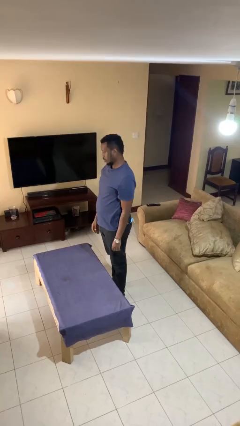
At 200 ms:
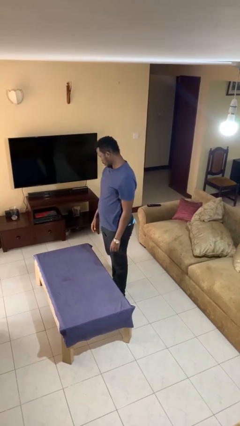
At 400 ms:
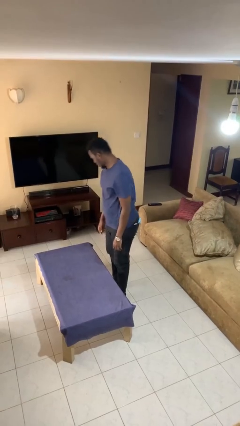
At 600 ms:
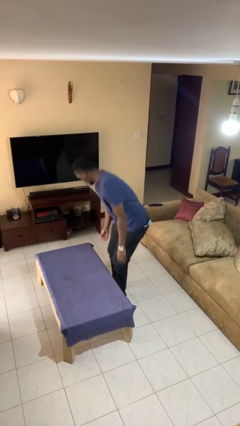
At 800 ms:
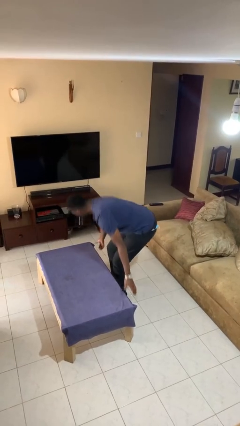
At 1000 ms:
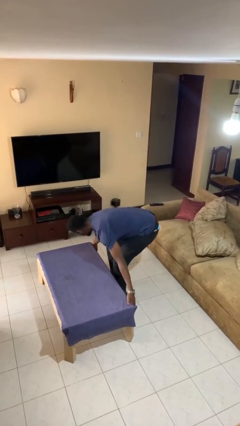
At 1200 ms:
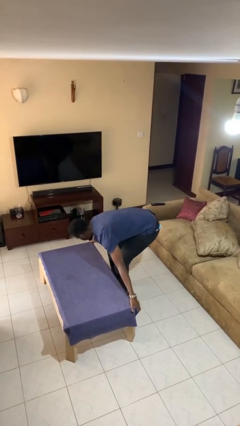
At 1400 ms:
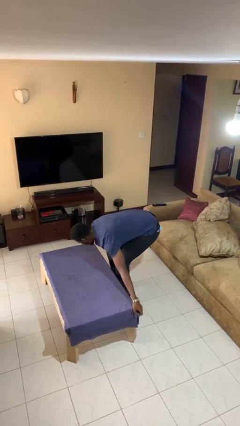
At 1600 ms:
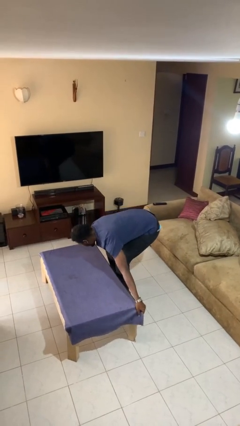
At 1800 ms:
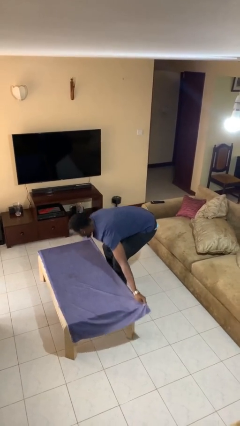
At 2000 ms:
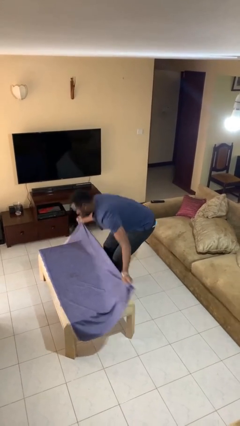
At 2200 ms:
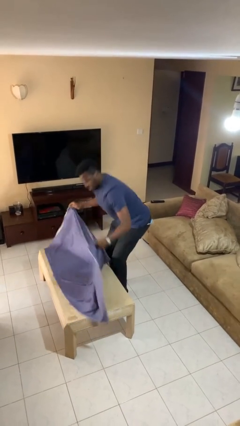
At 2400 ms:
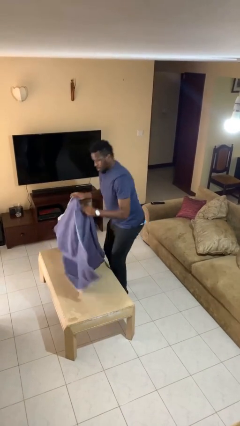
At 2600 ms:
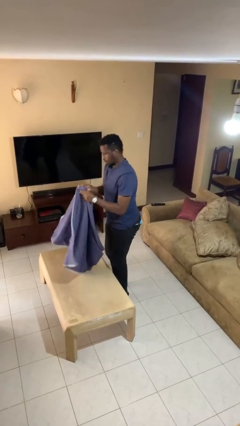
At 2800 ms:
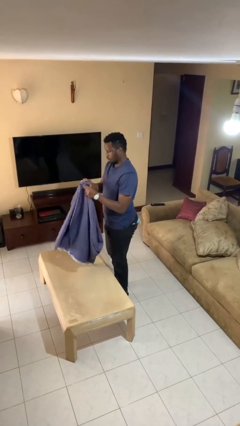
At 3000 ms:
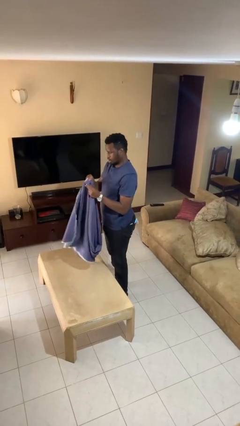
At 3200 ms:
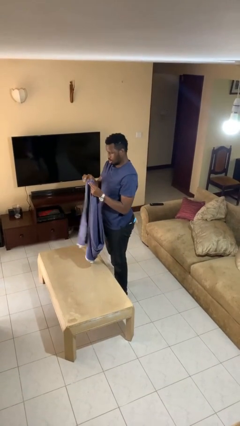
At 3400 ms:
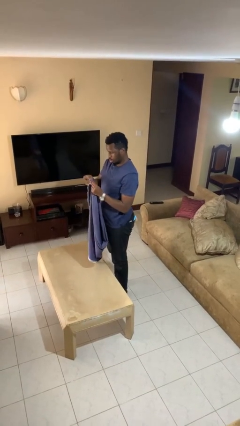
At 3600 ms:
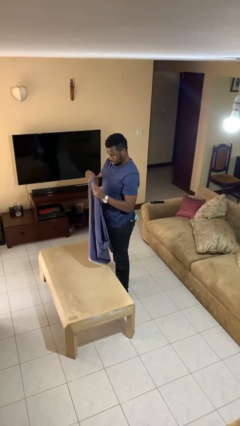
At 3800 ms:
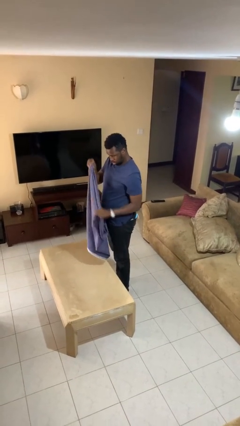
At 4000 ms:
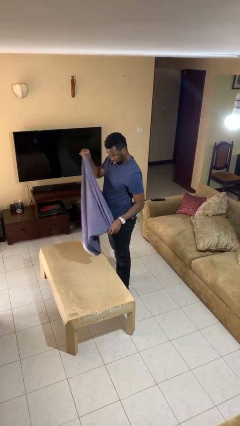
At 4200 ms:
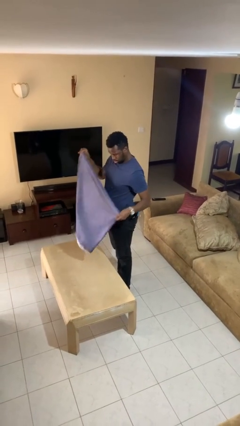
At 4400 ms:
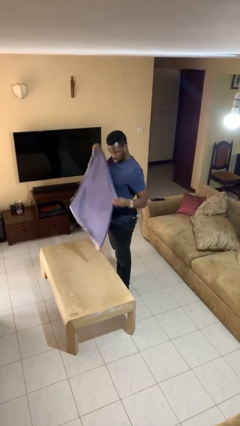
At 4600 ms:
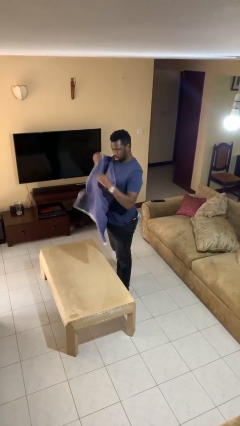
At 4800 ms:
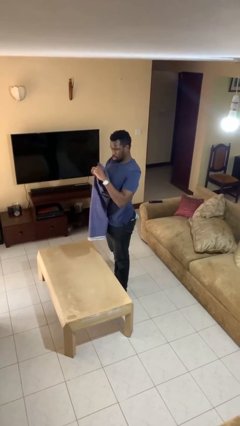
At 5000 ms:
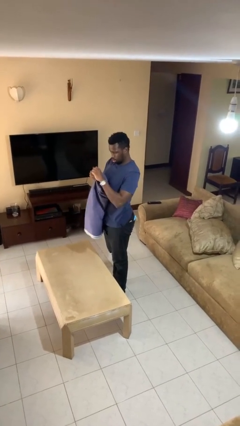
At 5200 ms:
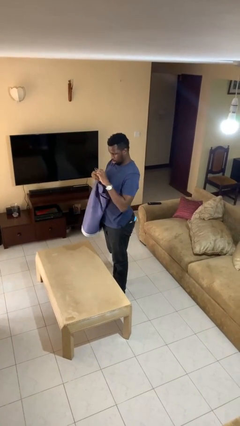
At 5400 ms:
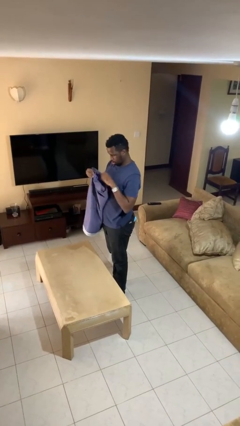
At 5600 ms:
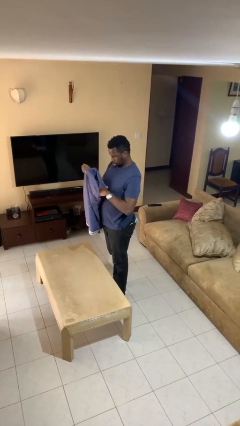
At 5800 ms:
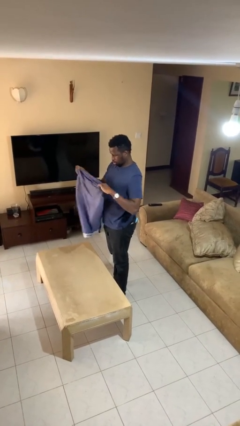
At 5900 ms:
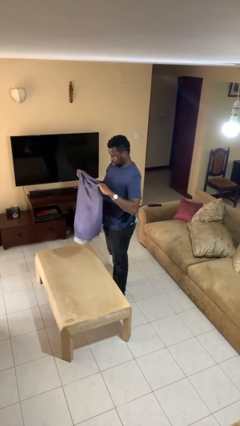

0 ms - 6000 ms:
person folds tablecloth

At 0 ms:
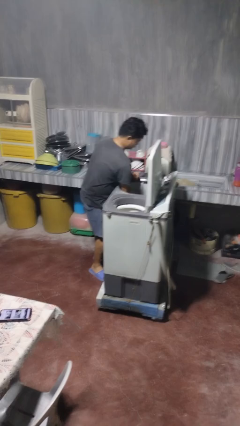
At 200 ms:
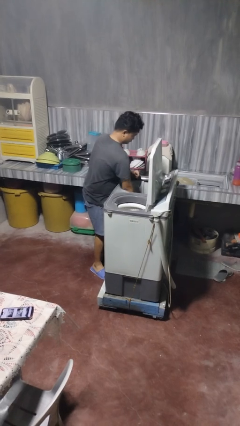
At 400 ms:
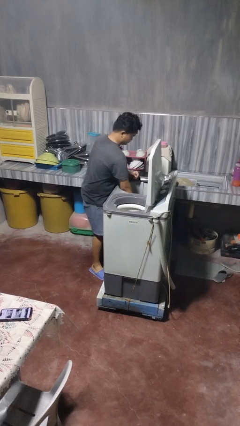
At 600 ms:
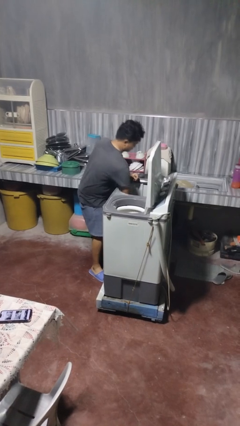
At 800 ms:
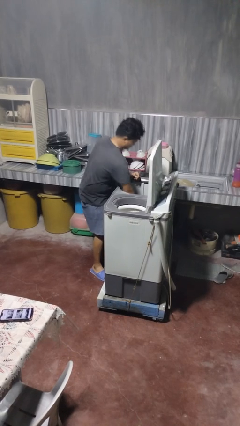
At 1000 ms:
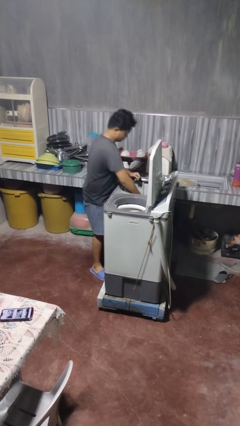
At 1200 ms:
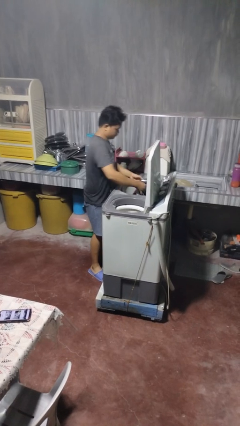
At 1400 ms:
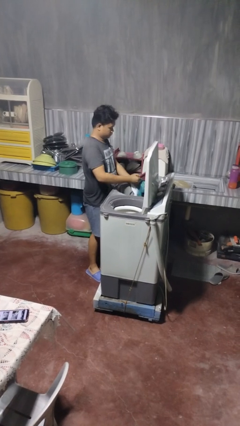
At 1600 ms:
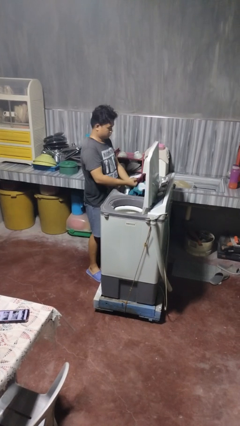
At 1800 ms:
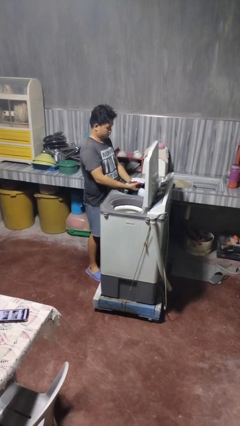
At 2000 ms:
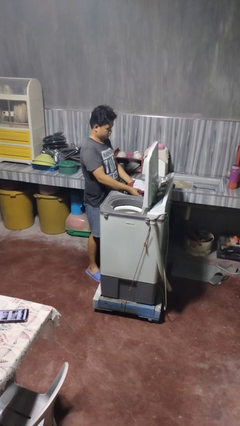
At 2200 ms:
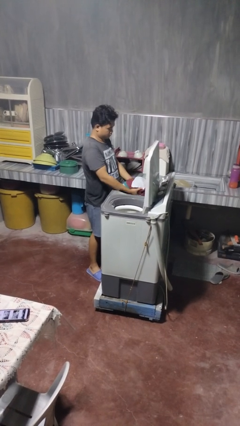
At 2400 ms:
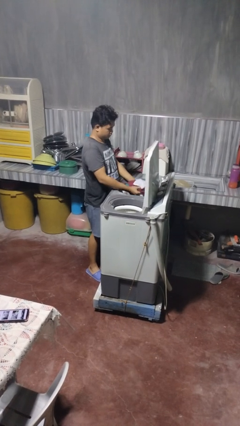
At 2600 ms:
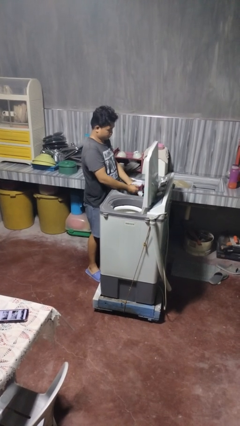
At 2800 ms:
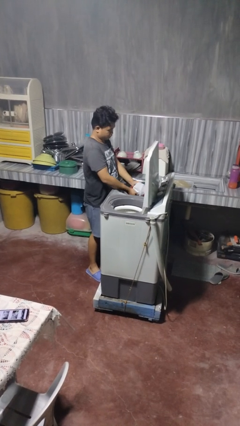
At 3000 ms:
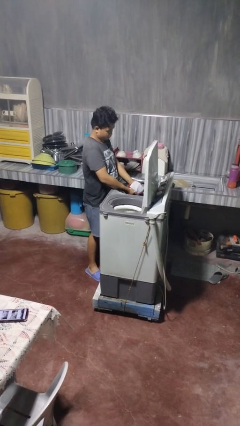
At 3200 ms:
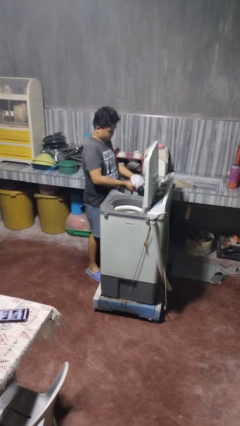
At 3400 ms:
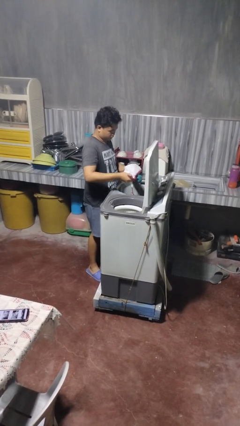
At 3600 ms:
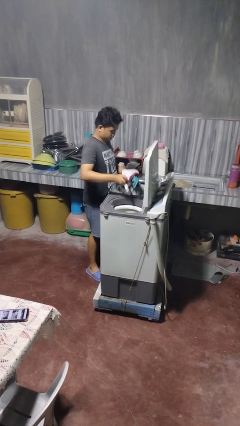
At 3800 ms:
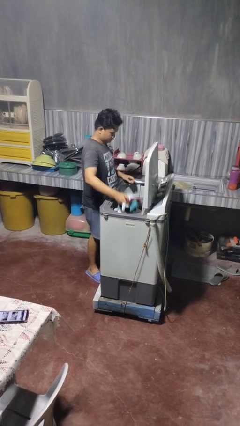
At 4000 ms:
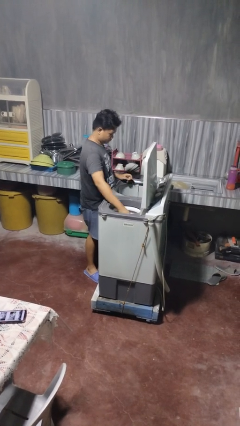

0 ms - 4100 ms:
person unloads clotheswasher

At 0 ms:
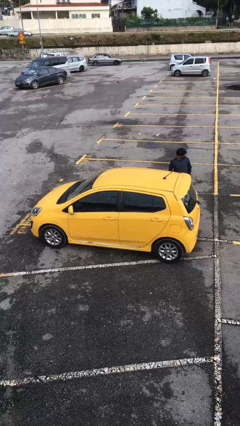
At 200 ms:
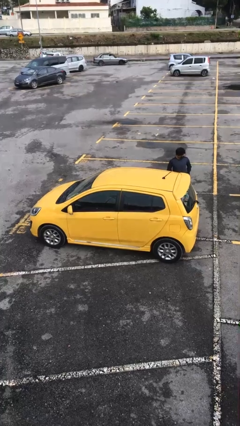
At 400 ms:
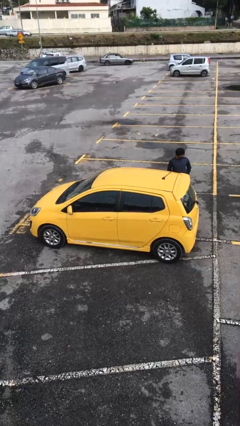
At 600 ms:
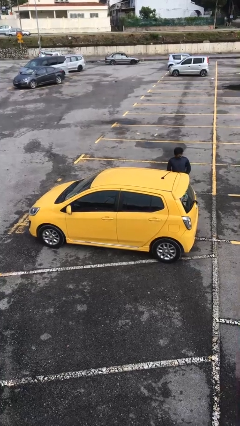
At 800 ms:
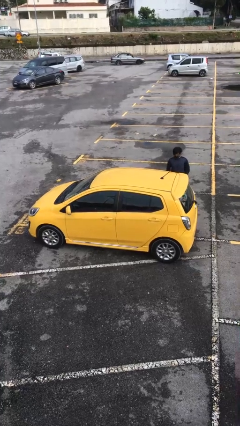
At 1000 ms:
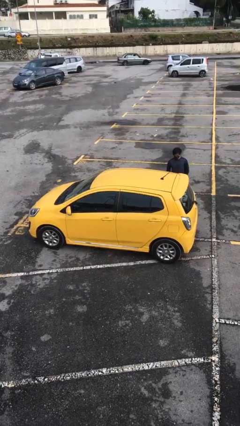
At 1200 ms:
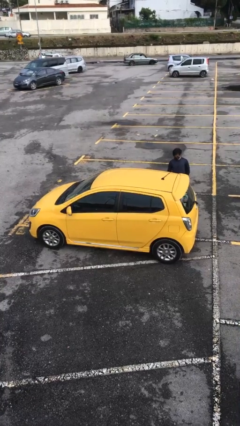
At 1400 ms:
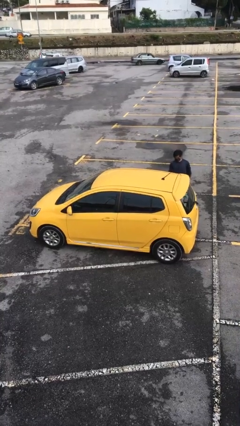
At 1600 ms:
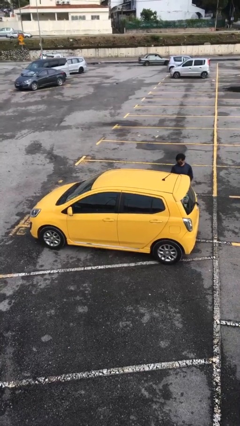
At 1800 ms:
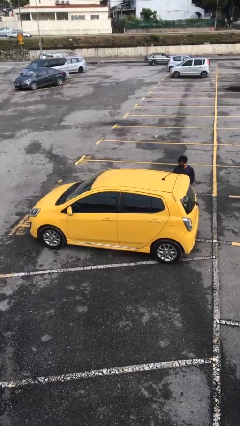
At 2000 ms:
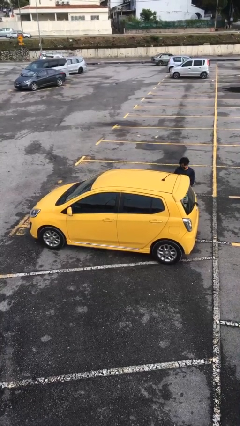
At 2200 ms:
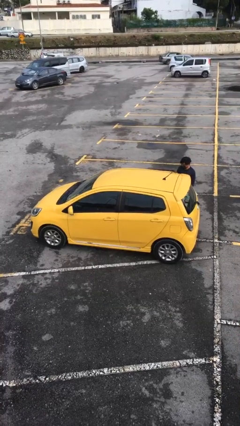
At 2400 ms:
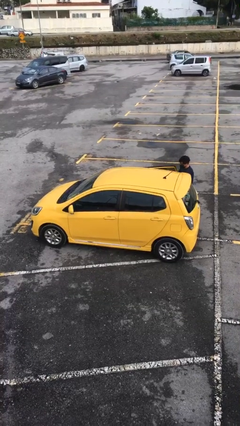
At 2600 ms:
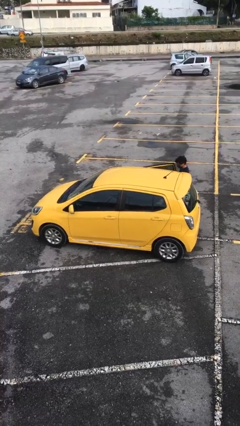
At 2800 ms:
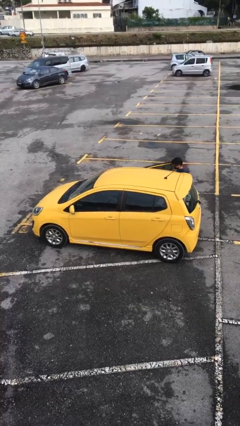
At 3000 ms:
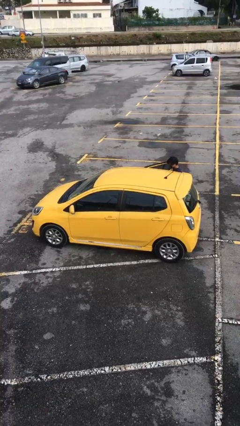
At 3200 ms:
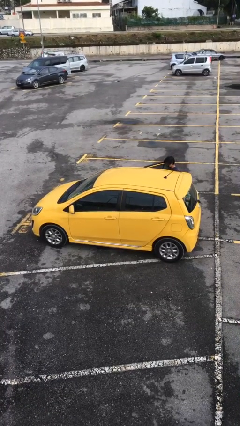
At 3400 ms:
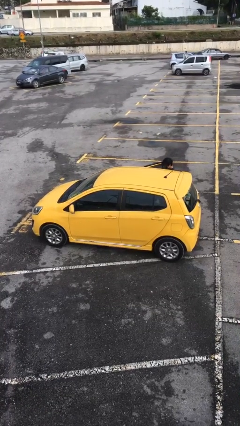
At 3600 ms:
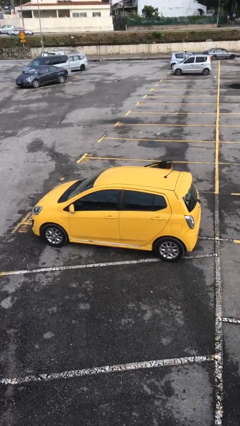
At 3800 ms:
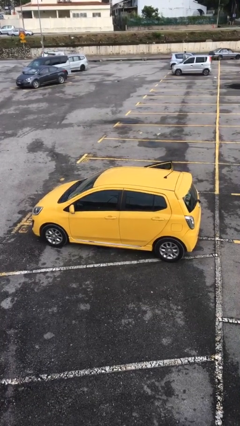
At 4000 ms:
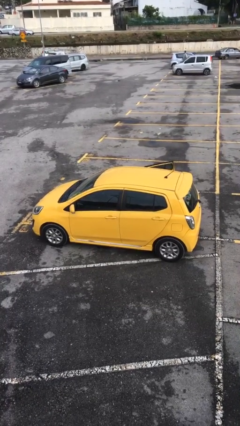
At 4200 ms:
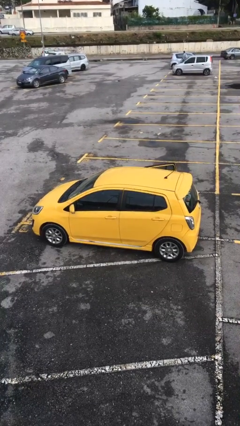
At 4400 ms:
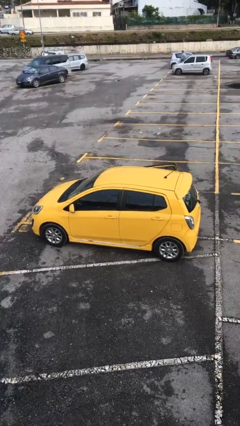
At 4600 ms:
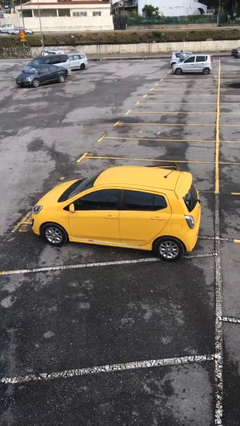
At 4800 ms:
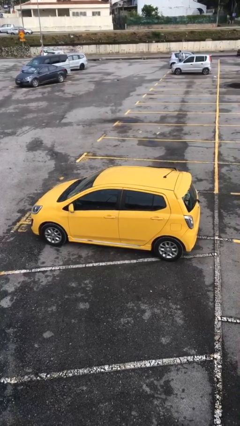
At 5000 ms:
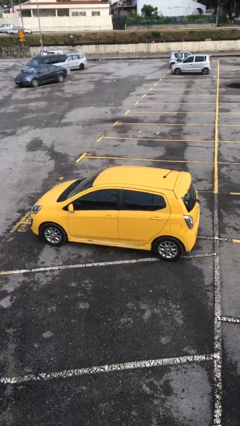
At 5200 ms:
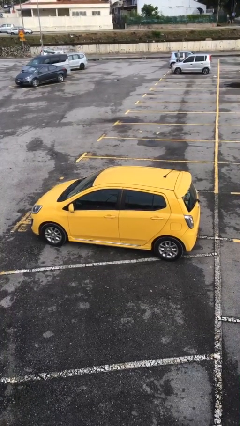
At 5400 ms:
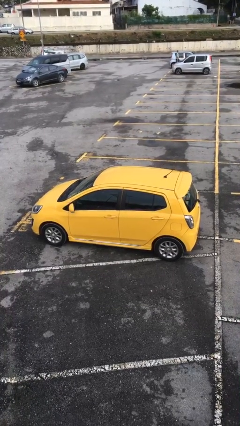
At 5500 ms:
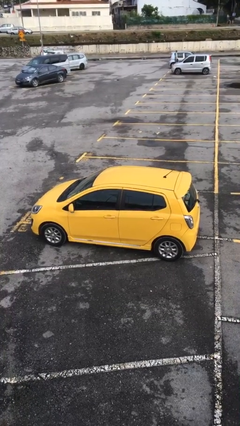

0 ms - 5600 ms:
car picks up person

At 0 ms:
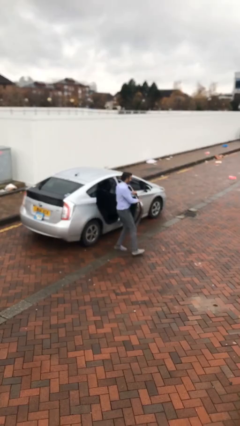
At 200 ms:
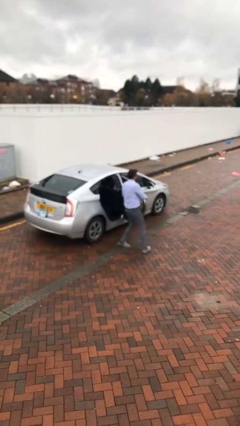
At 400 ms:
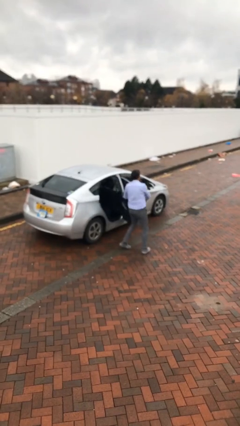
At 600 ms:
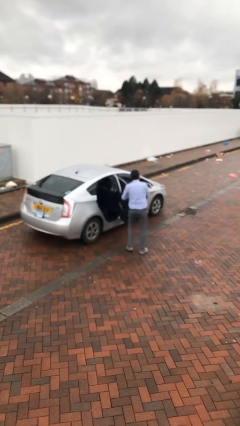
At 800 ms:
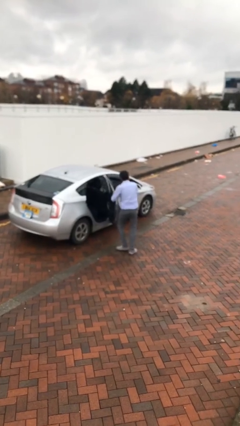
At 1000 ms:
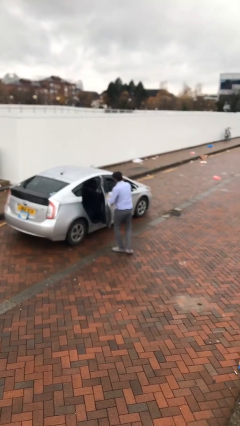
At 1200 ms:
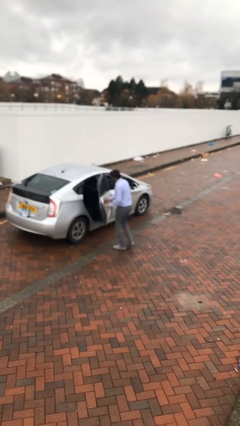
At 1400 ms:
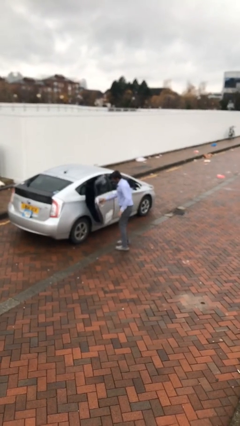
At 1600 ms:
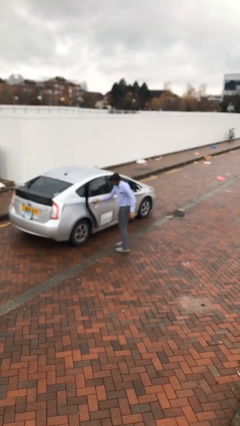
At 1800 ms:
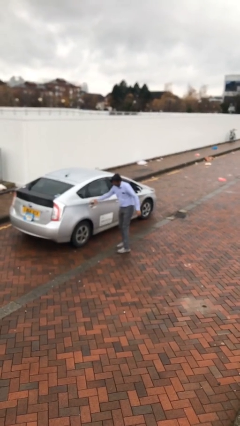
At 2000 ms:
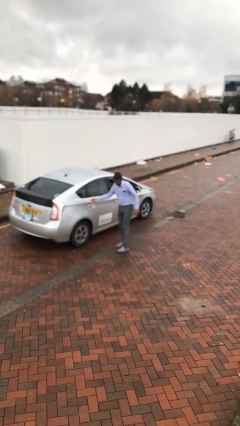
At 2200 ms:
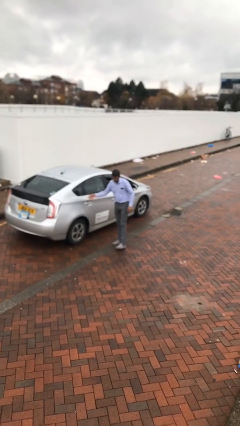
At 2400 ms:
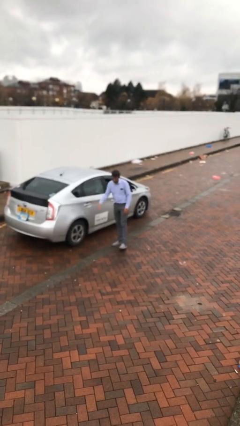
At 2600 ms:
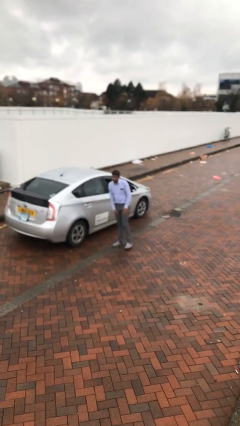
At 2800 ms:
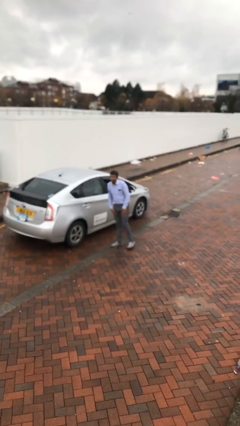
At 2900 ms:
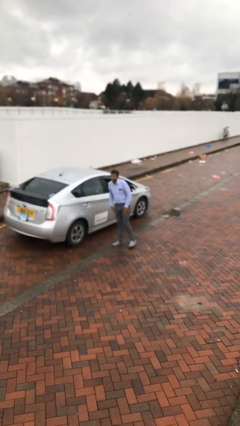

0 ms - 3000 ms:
person closes car door
